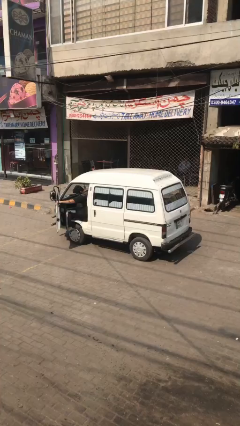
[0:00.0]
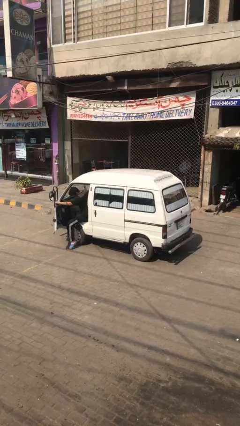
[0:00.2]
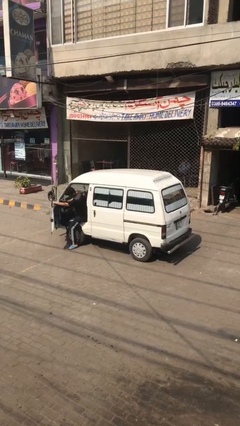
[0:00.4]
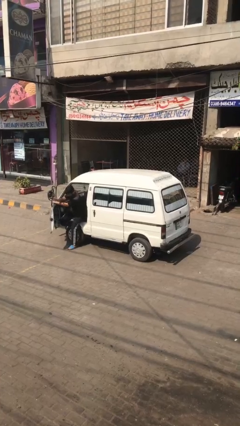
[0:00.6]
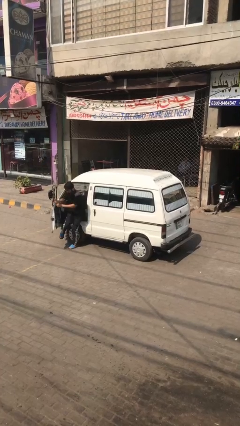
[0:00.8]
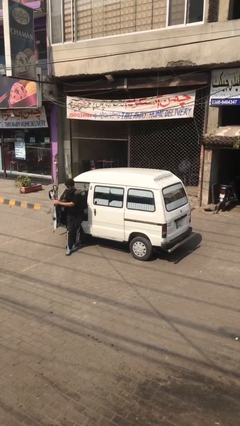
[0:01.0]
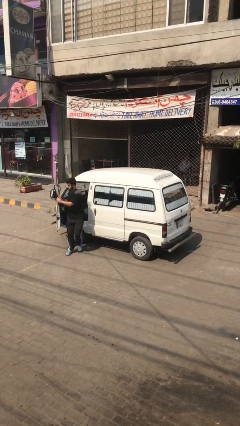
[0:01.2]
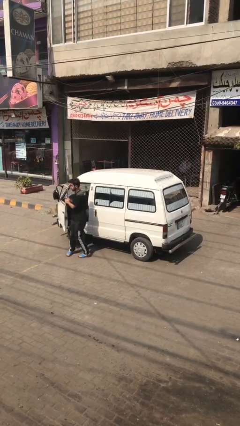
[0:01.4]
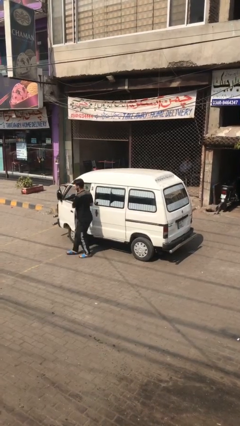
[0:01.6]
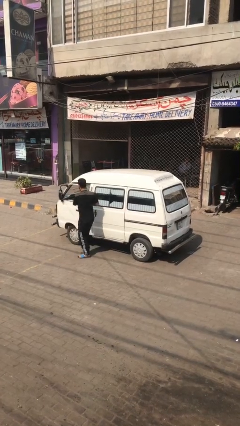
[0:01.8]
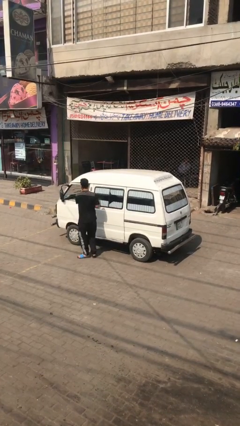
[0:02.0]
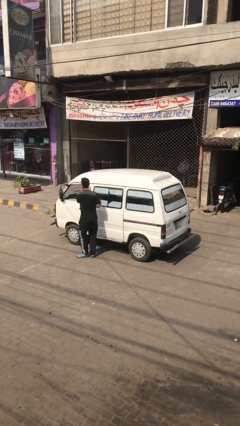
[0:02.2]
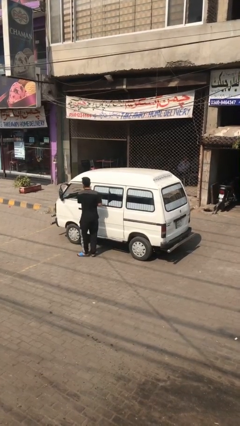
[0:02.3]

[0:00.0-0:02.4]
car drops off person

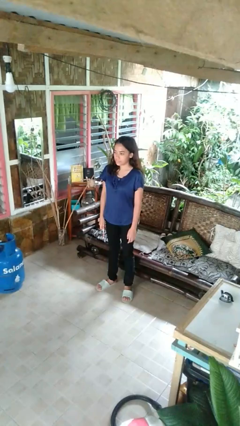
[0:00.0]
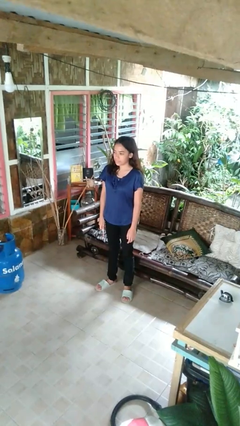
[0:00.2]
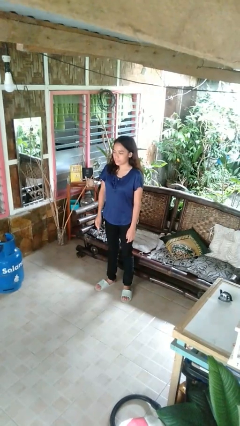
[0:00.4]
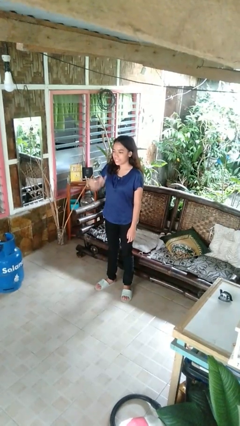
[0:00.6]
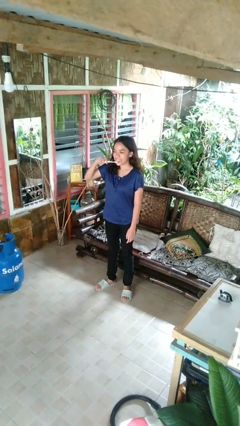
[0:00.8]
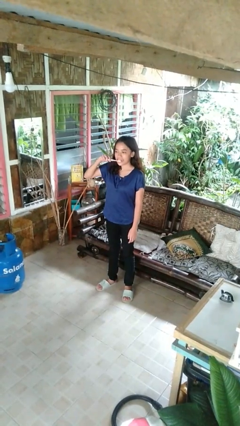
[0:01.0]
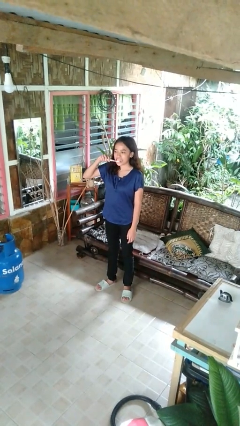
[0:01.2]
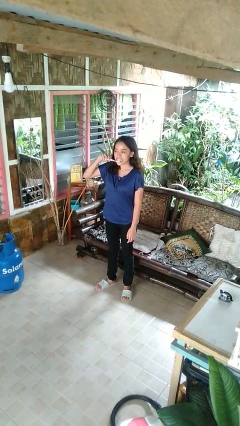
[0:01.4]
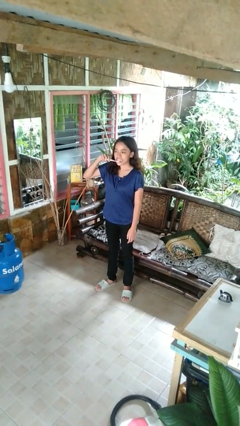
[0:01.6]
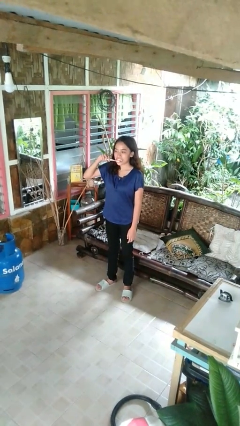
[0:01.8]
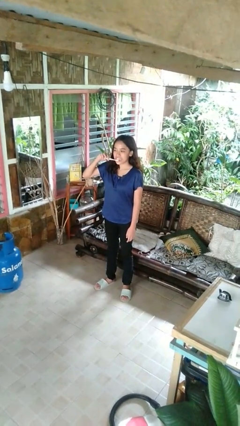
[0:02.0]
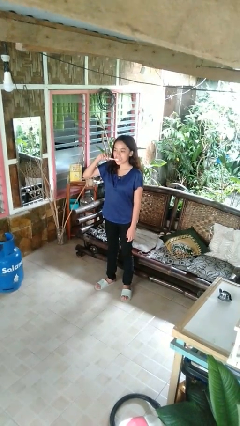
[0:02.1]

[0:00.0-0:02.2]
person brushes teeth

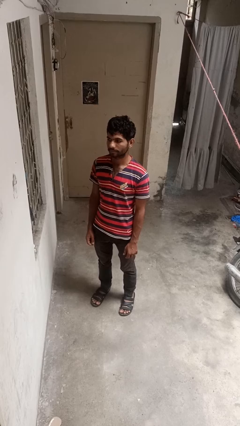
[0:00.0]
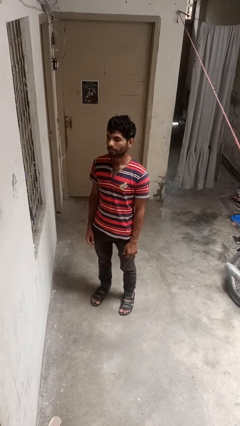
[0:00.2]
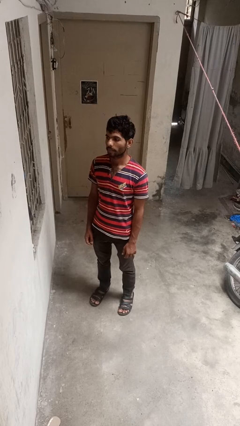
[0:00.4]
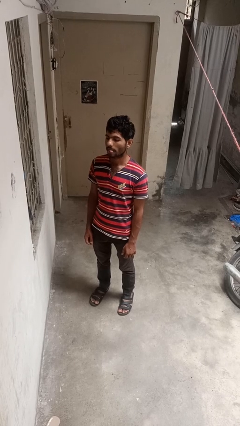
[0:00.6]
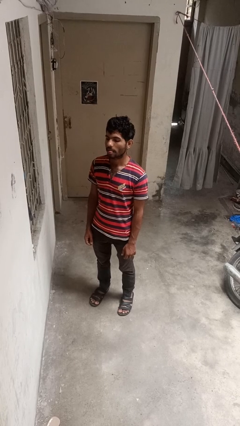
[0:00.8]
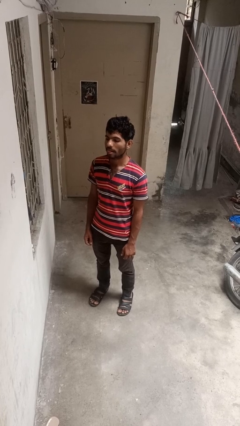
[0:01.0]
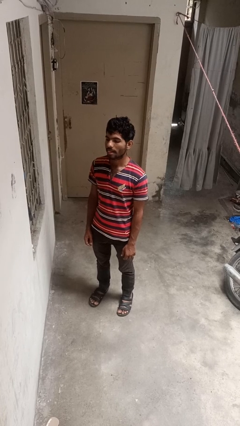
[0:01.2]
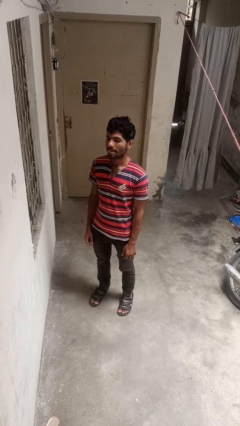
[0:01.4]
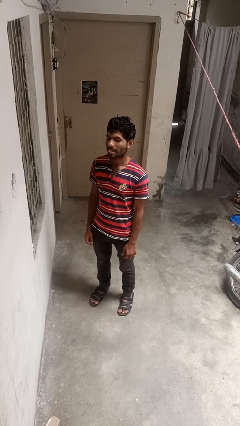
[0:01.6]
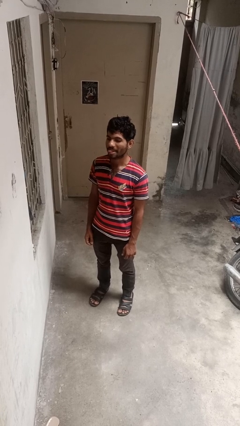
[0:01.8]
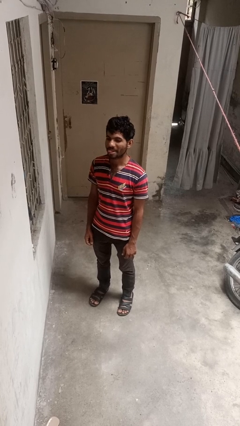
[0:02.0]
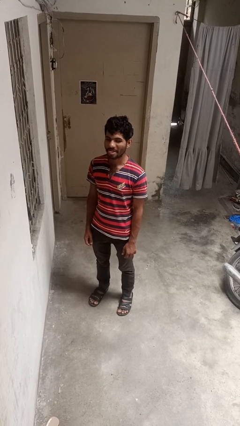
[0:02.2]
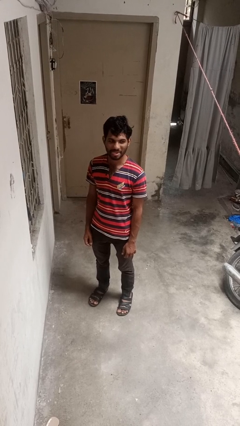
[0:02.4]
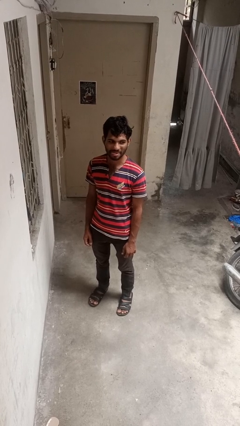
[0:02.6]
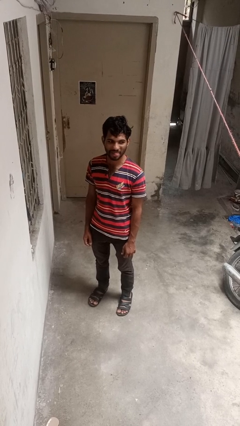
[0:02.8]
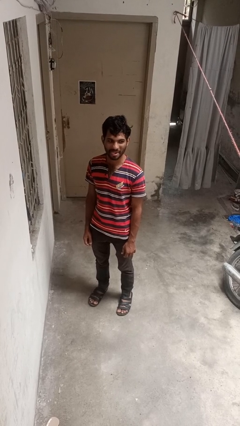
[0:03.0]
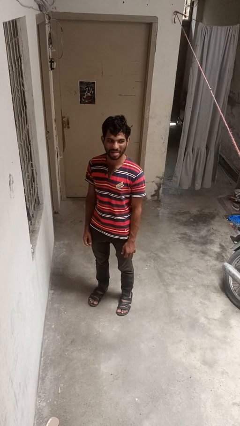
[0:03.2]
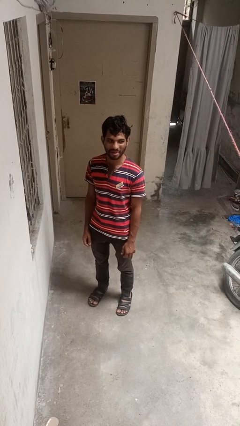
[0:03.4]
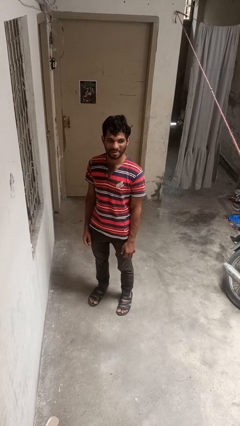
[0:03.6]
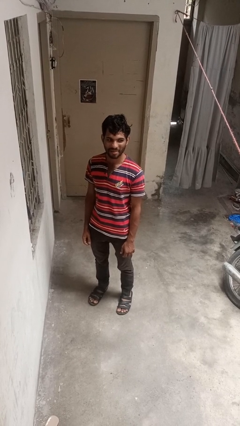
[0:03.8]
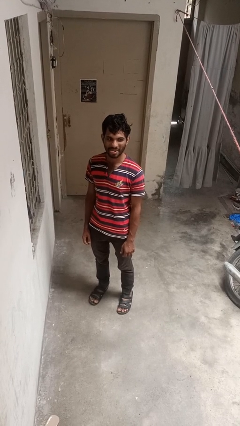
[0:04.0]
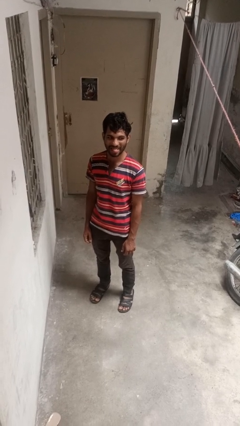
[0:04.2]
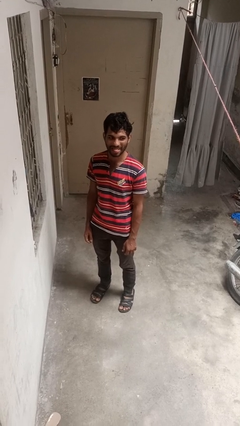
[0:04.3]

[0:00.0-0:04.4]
person sticks out tongue

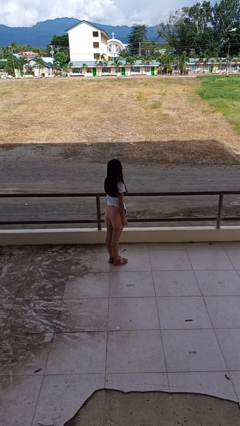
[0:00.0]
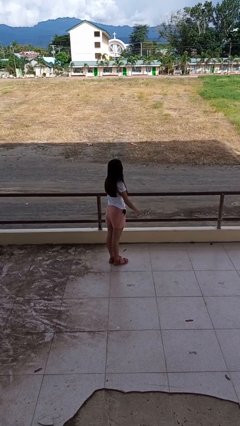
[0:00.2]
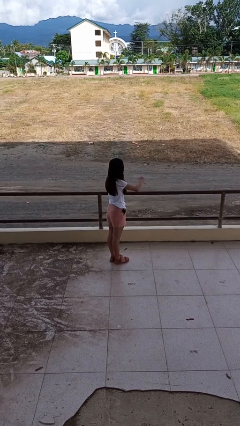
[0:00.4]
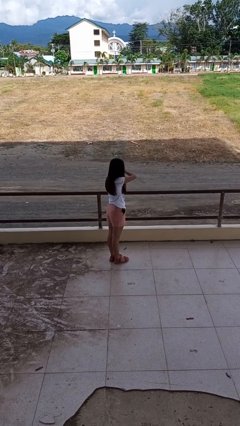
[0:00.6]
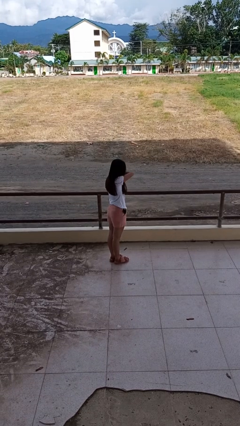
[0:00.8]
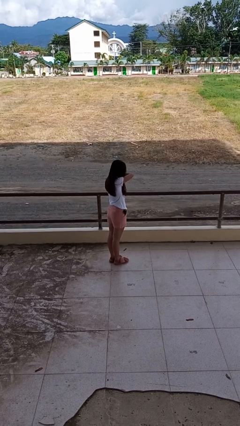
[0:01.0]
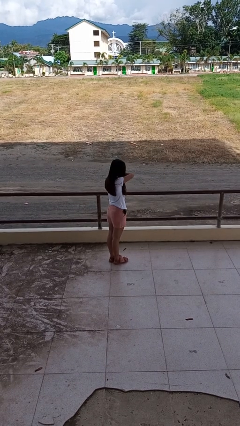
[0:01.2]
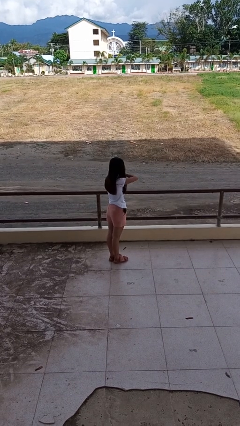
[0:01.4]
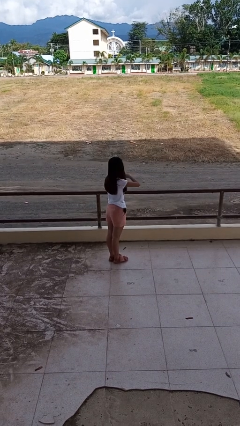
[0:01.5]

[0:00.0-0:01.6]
person sneezes into arm

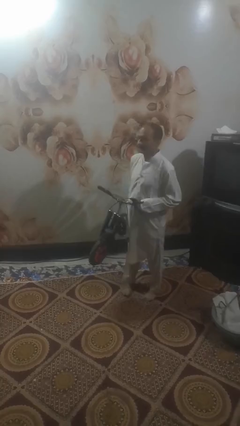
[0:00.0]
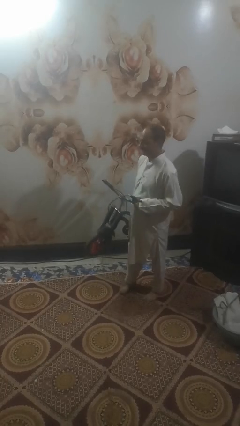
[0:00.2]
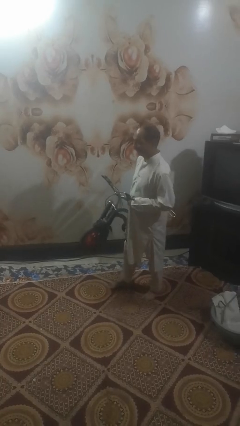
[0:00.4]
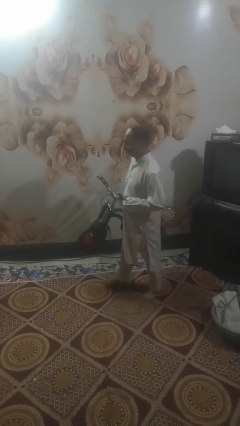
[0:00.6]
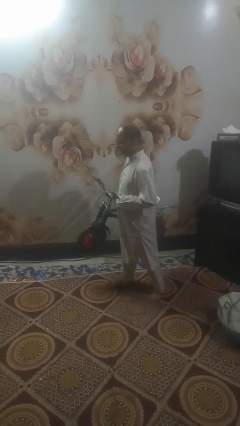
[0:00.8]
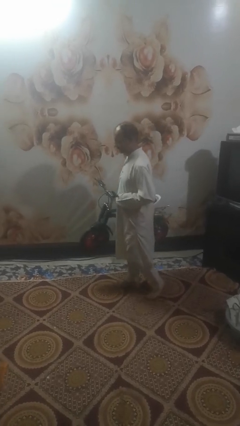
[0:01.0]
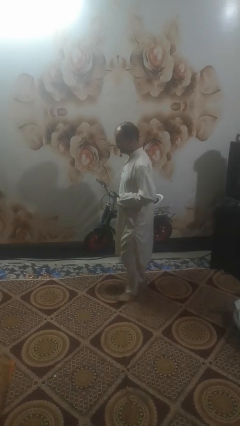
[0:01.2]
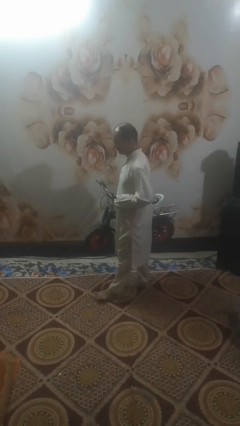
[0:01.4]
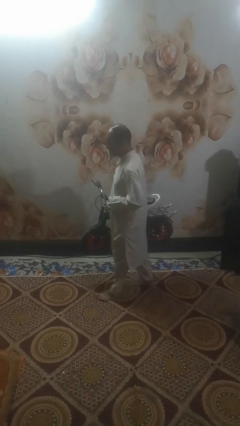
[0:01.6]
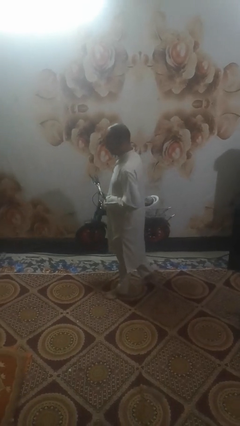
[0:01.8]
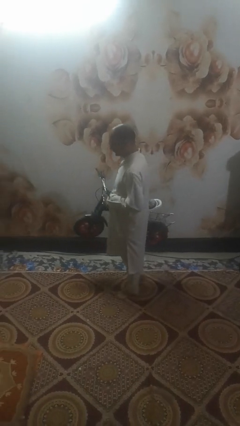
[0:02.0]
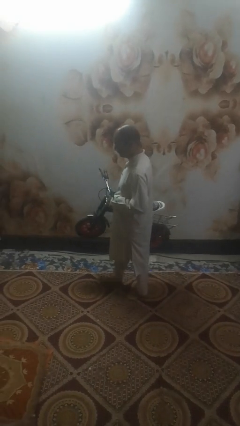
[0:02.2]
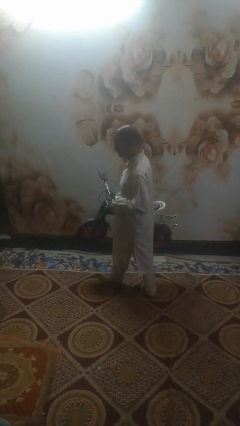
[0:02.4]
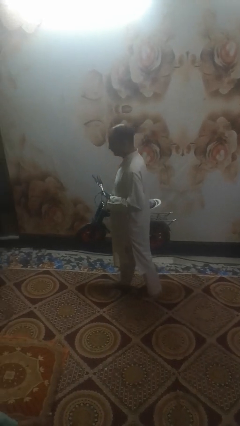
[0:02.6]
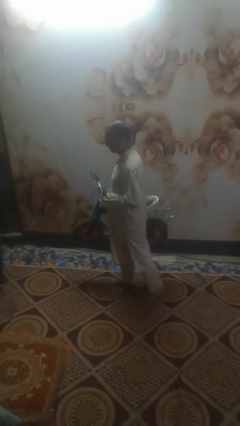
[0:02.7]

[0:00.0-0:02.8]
person carries bicycle

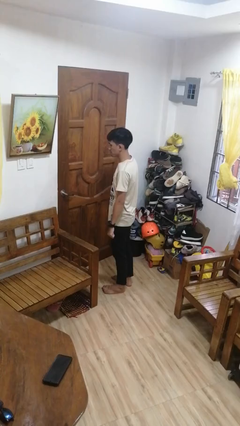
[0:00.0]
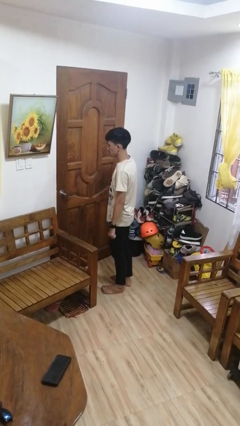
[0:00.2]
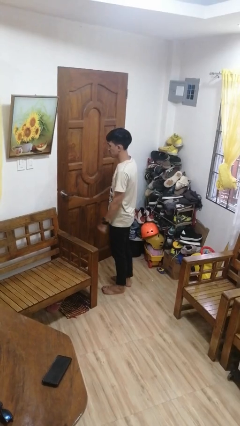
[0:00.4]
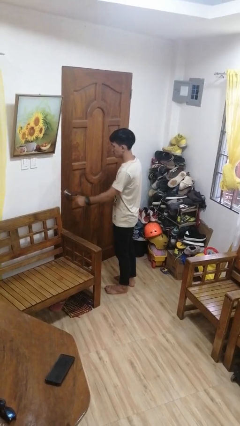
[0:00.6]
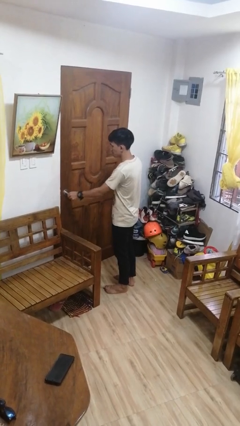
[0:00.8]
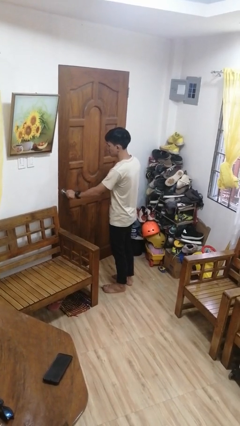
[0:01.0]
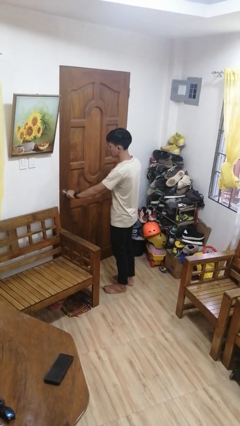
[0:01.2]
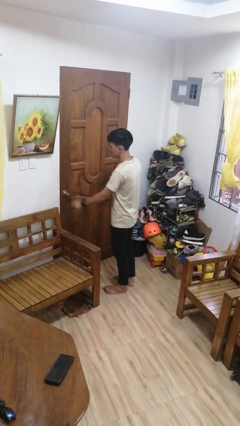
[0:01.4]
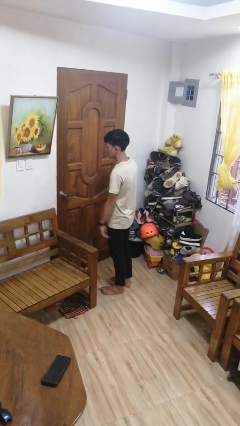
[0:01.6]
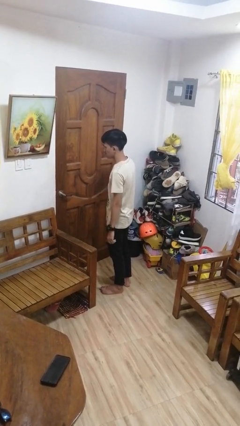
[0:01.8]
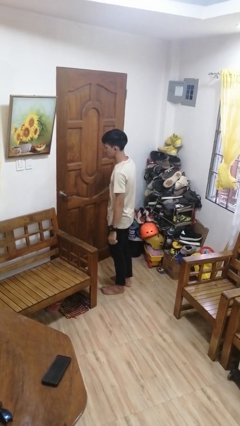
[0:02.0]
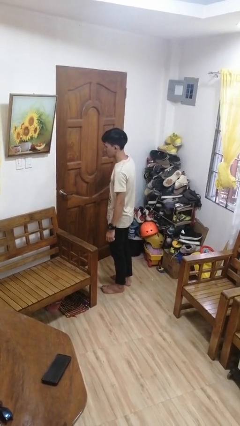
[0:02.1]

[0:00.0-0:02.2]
person unlocks door with keys

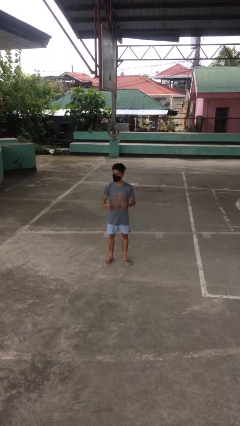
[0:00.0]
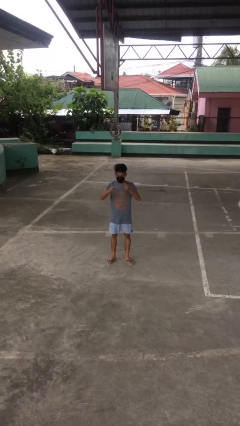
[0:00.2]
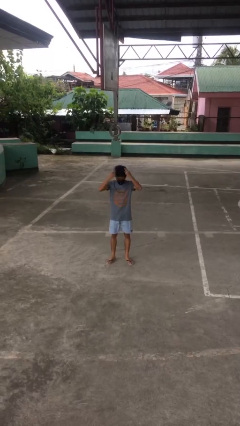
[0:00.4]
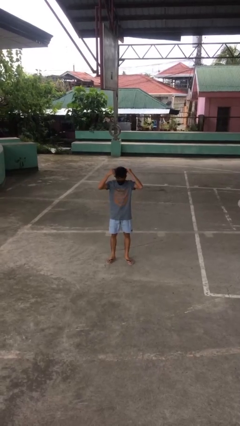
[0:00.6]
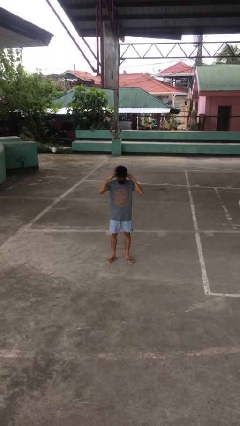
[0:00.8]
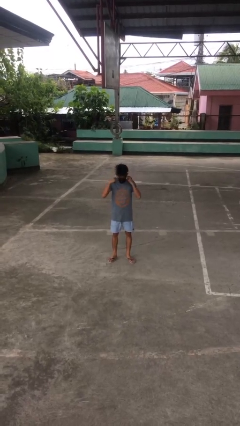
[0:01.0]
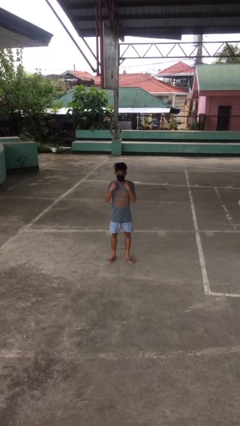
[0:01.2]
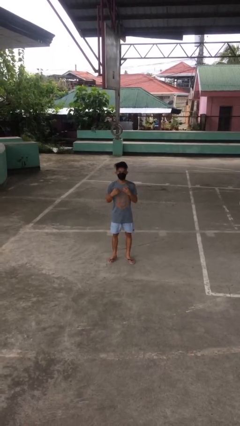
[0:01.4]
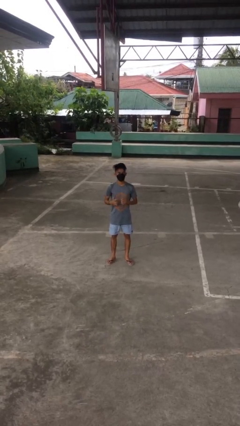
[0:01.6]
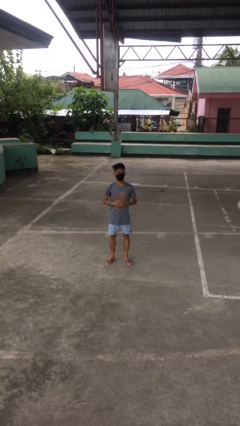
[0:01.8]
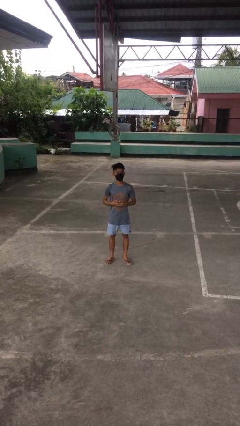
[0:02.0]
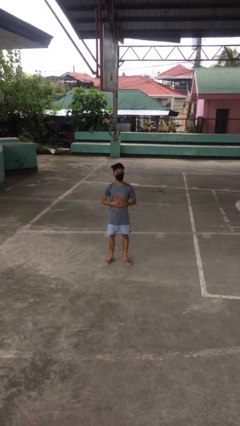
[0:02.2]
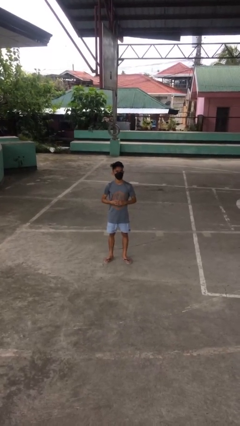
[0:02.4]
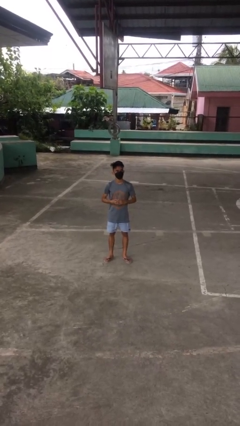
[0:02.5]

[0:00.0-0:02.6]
person puts on necklace
